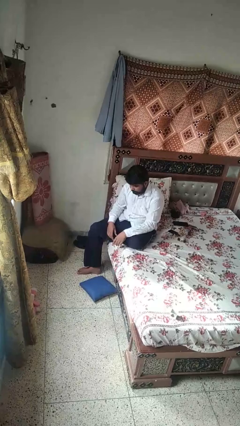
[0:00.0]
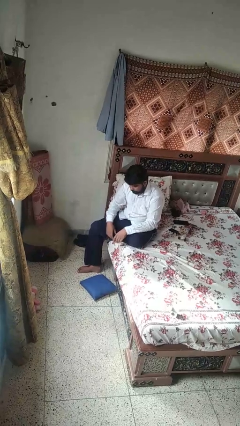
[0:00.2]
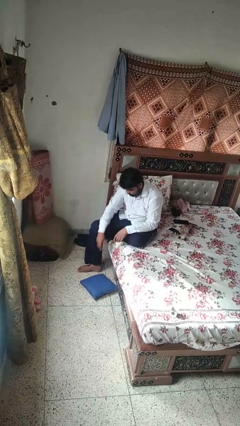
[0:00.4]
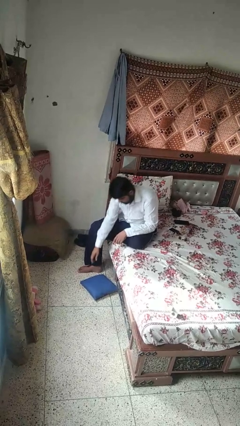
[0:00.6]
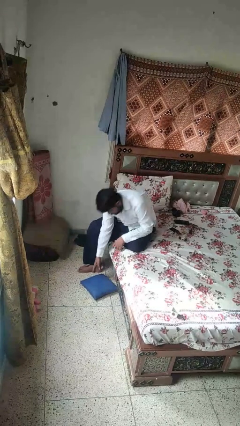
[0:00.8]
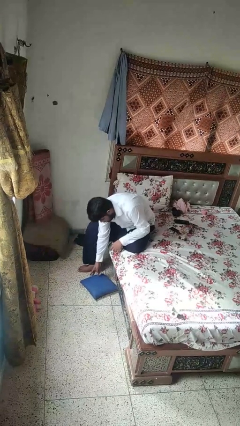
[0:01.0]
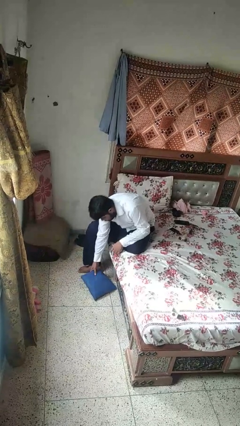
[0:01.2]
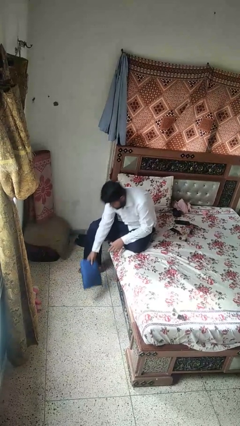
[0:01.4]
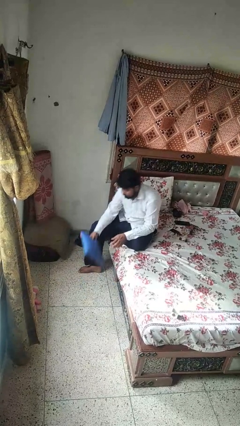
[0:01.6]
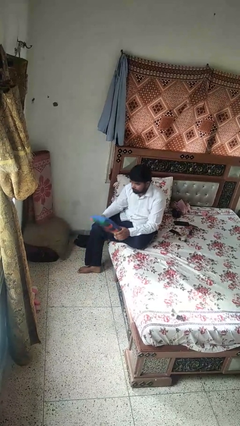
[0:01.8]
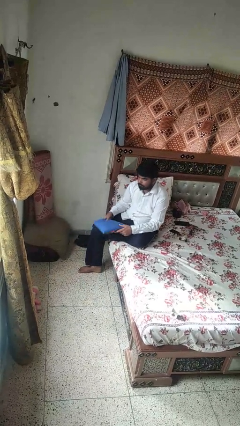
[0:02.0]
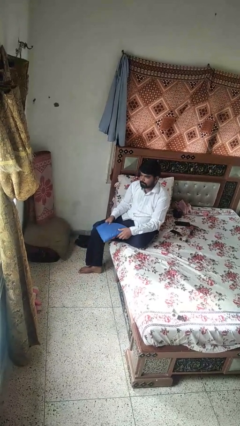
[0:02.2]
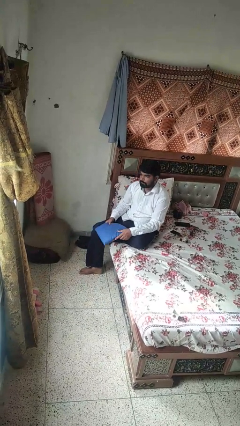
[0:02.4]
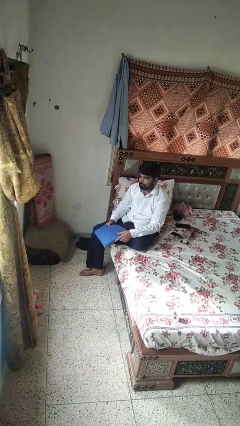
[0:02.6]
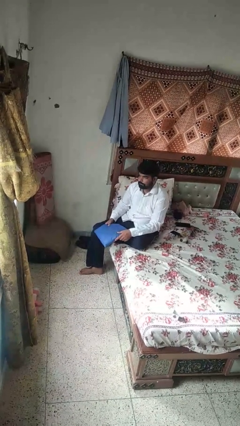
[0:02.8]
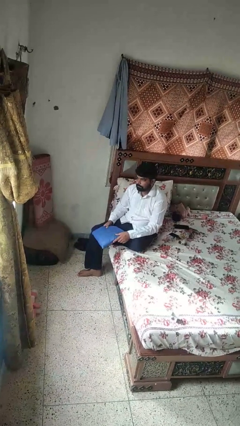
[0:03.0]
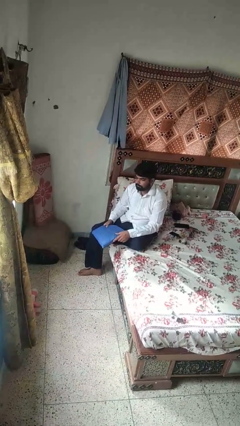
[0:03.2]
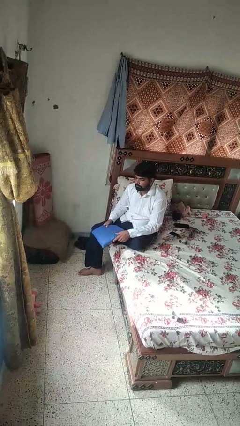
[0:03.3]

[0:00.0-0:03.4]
person picks up object from floor

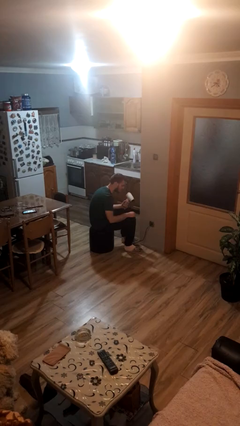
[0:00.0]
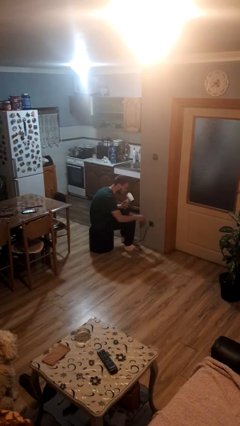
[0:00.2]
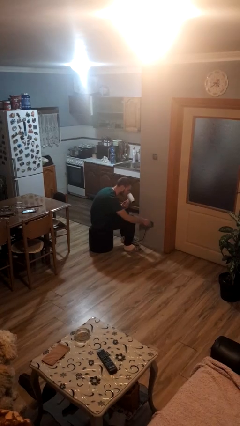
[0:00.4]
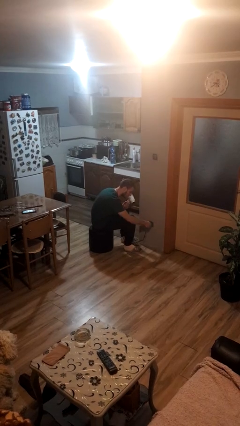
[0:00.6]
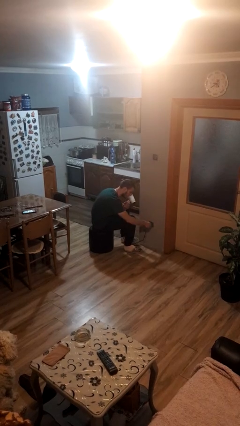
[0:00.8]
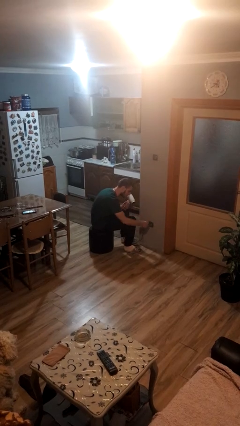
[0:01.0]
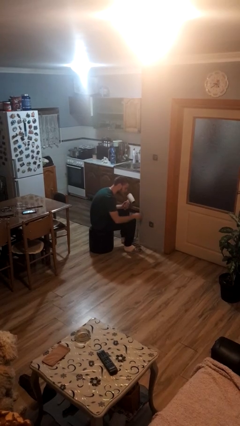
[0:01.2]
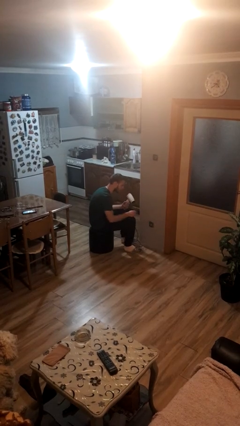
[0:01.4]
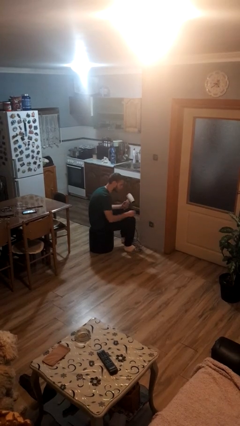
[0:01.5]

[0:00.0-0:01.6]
person unplugs from electrical socket

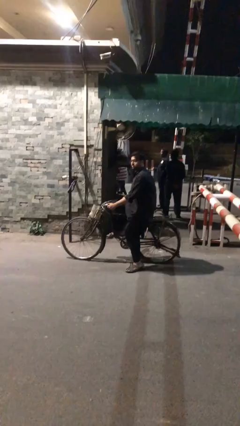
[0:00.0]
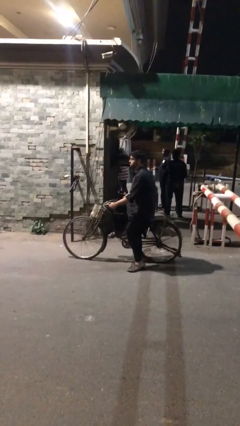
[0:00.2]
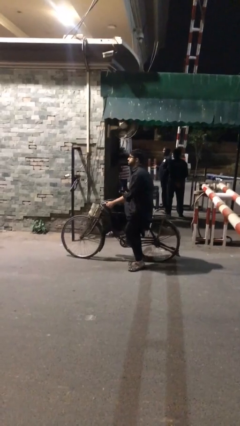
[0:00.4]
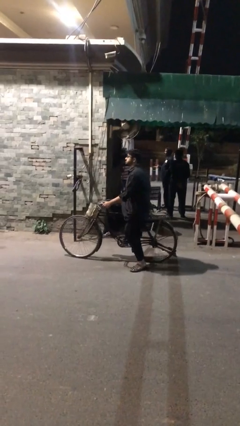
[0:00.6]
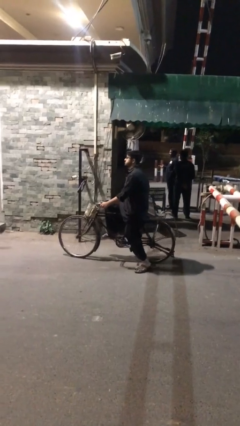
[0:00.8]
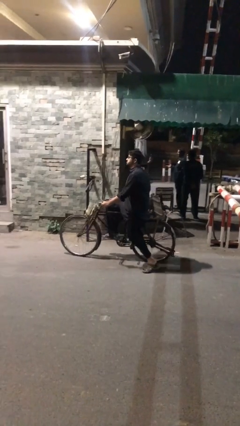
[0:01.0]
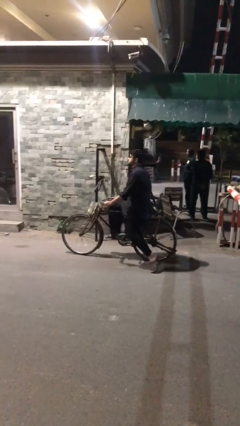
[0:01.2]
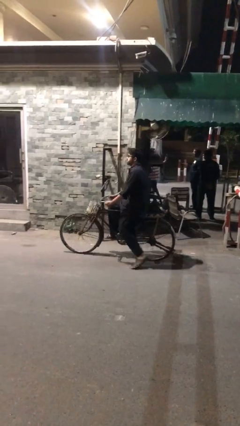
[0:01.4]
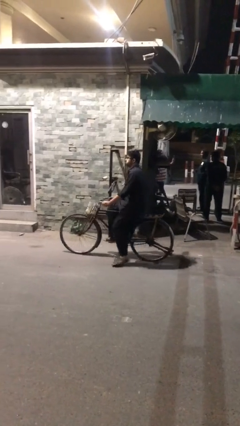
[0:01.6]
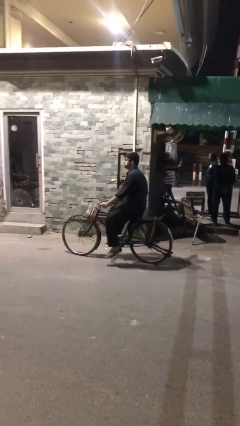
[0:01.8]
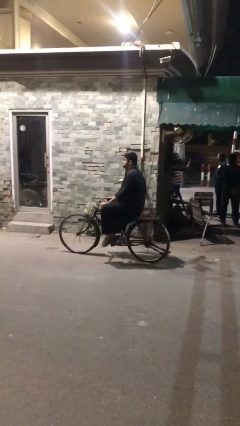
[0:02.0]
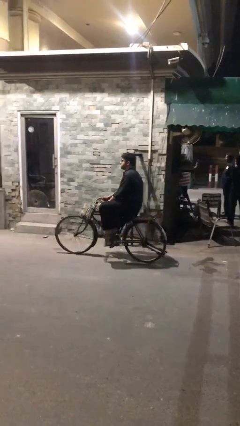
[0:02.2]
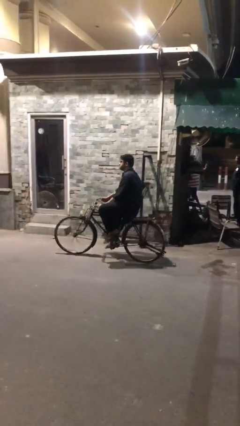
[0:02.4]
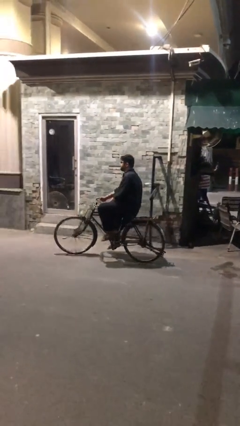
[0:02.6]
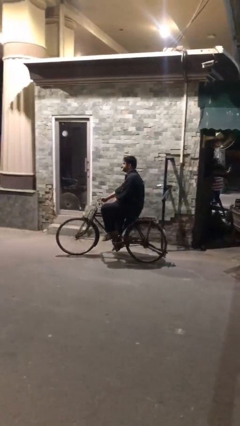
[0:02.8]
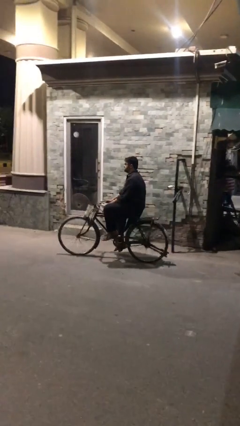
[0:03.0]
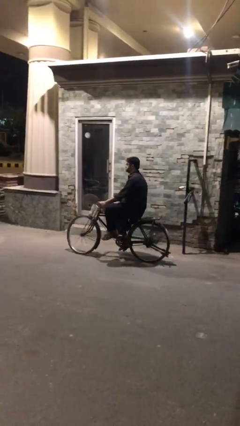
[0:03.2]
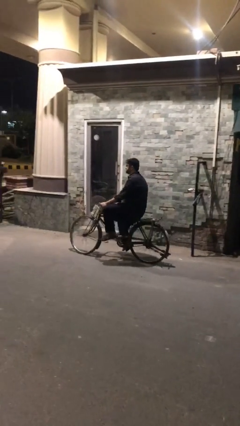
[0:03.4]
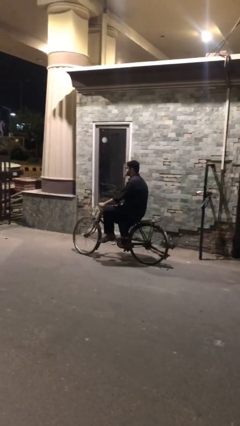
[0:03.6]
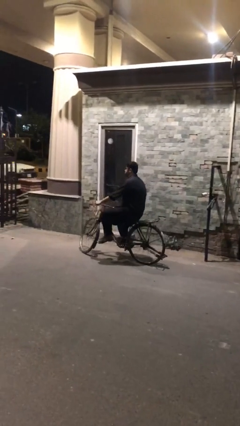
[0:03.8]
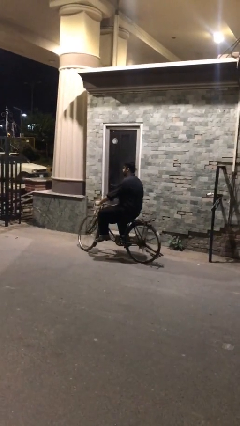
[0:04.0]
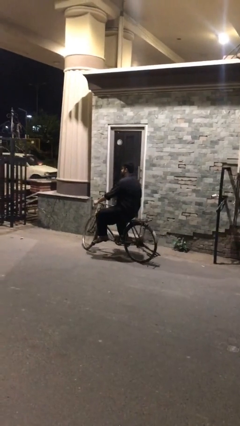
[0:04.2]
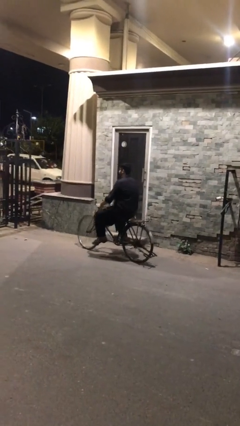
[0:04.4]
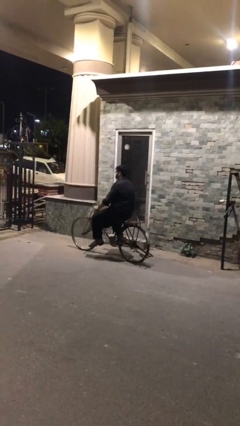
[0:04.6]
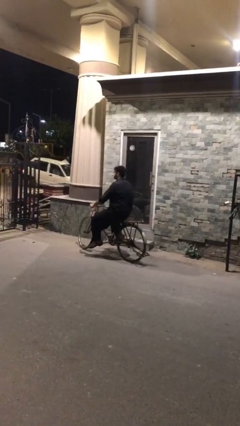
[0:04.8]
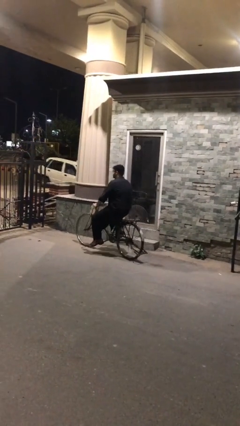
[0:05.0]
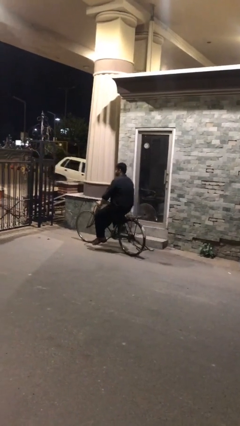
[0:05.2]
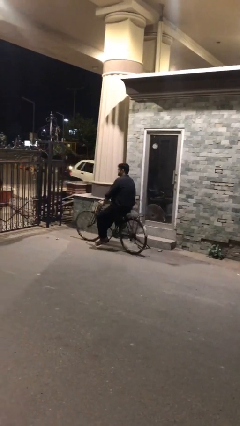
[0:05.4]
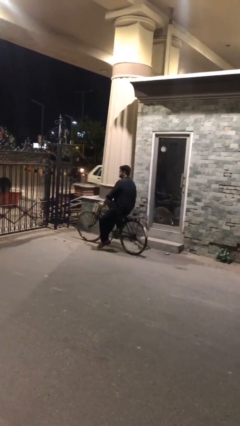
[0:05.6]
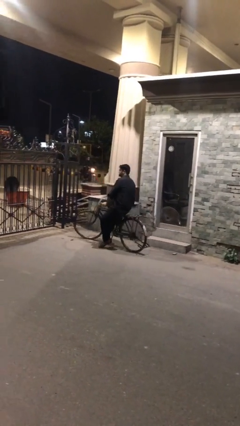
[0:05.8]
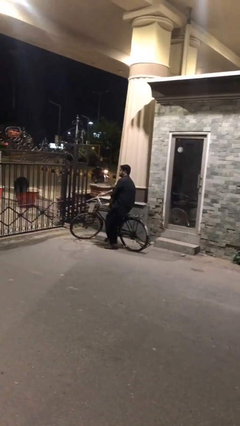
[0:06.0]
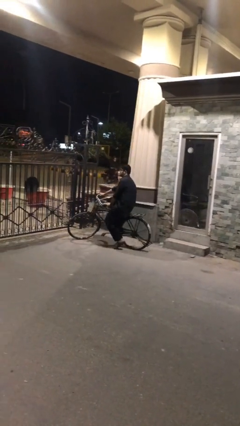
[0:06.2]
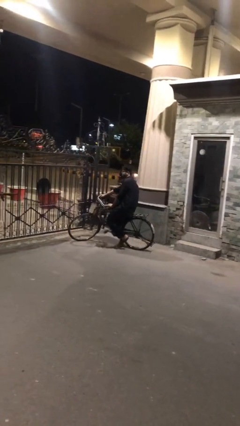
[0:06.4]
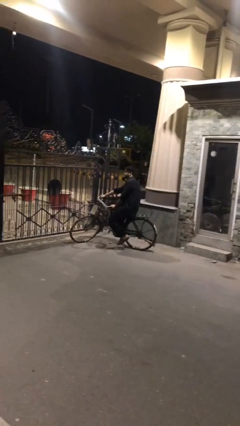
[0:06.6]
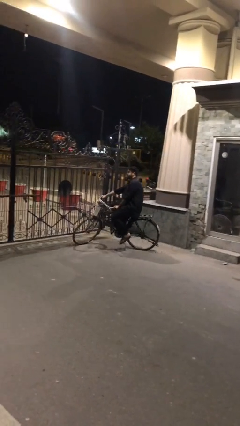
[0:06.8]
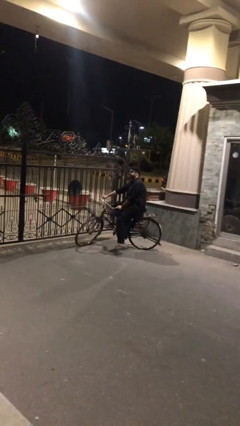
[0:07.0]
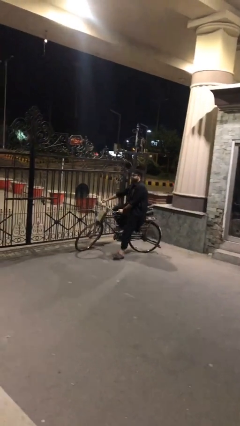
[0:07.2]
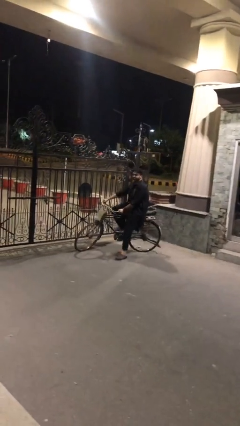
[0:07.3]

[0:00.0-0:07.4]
person rides bicycle

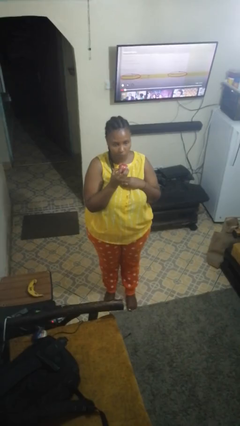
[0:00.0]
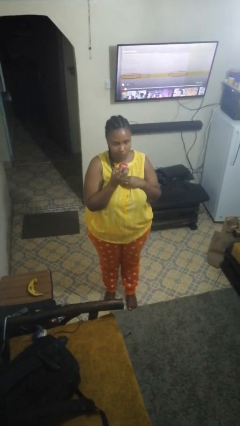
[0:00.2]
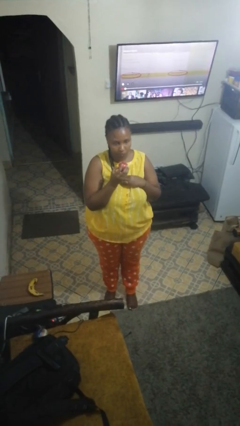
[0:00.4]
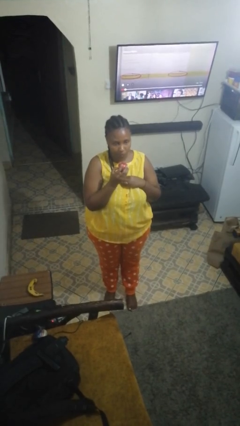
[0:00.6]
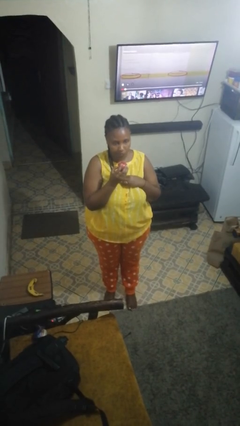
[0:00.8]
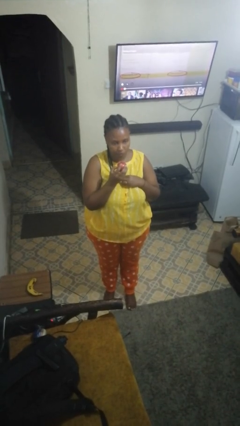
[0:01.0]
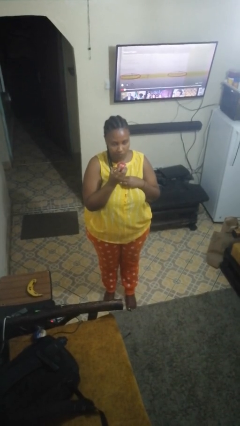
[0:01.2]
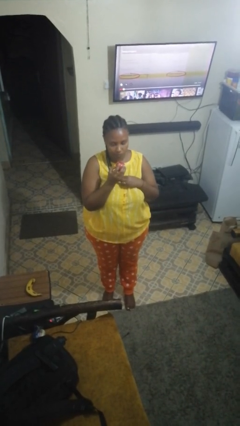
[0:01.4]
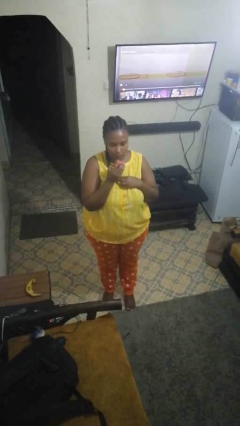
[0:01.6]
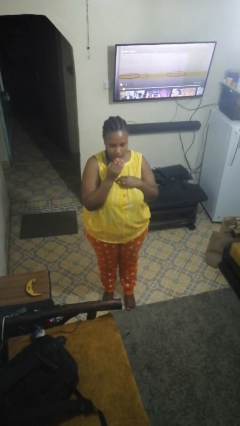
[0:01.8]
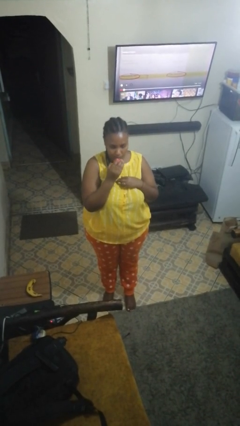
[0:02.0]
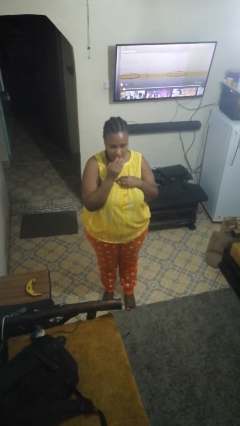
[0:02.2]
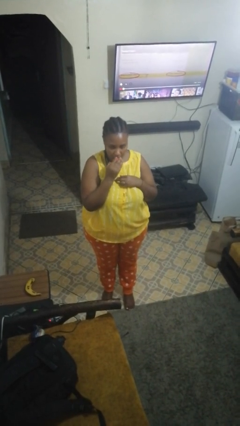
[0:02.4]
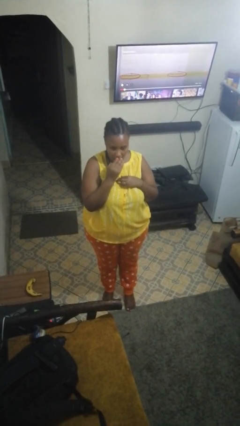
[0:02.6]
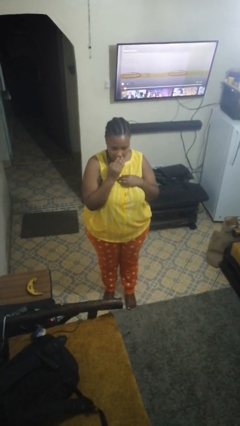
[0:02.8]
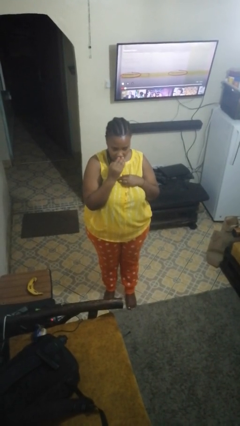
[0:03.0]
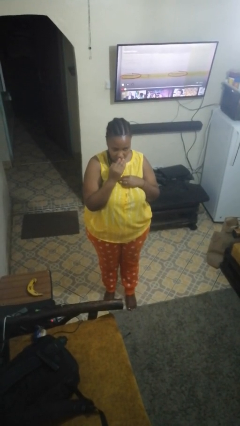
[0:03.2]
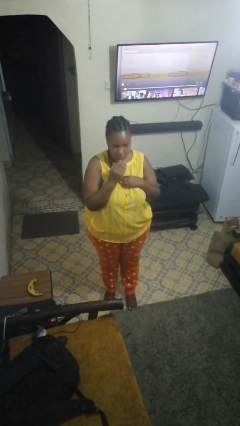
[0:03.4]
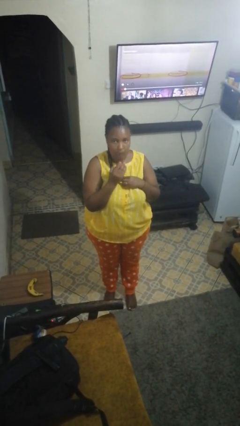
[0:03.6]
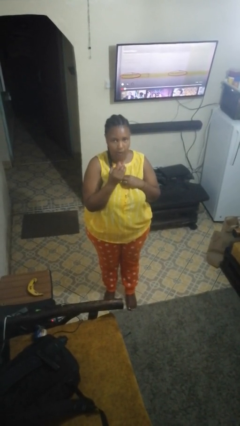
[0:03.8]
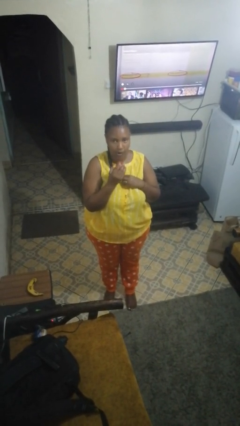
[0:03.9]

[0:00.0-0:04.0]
person eats apple

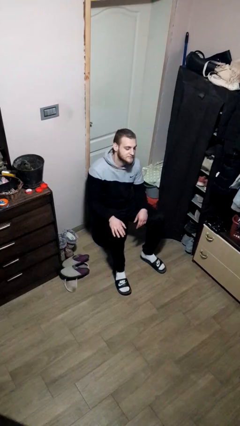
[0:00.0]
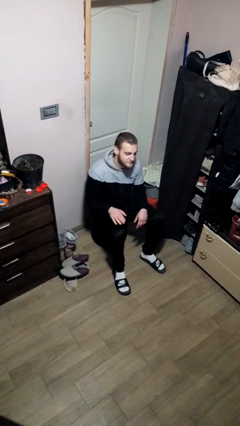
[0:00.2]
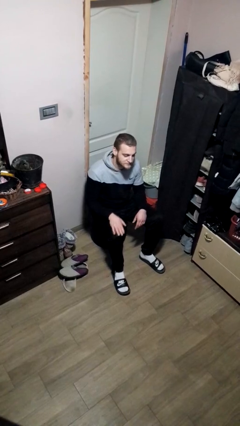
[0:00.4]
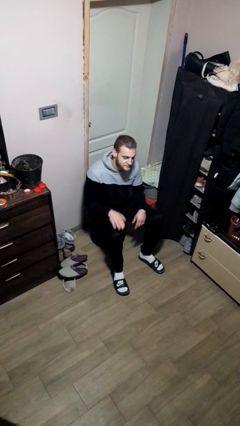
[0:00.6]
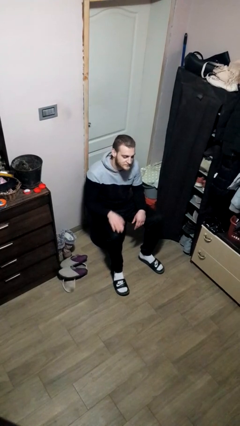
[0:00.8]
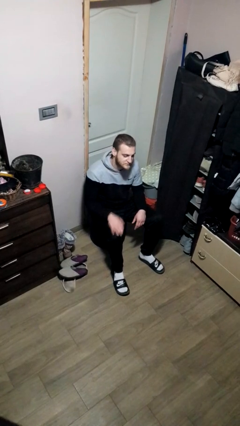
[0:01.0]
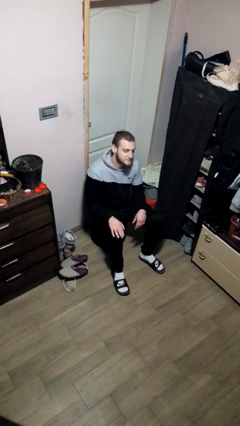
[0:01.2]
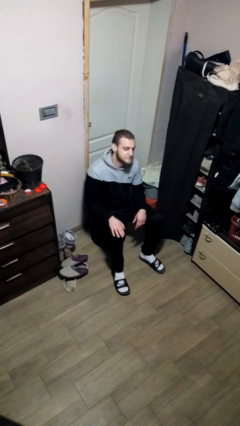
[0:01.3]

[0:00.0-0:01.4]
person slaps hands on thighs
